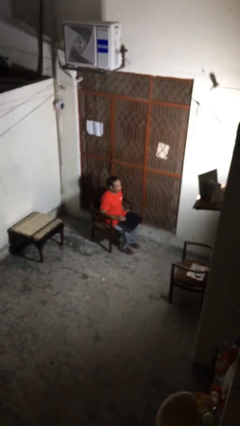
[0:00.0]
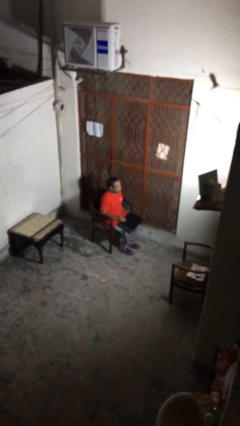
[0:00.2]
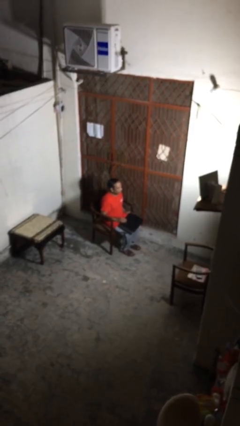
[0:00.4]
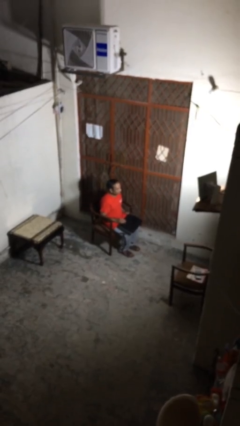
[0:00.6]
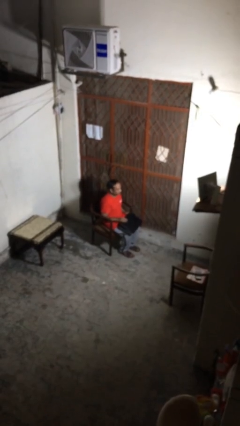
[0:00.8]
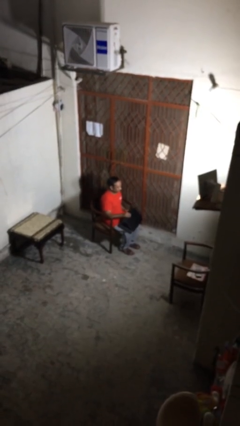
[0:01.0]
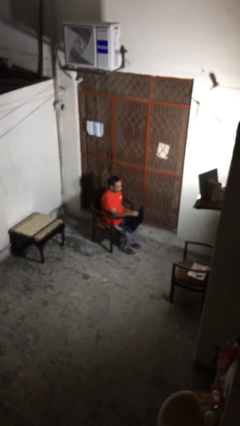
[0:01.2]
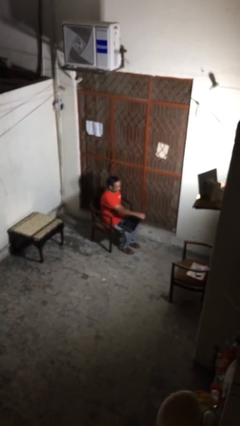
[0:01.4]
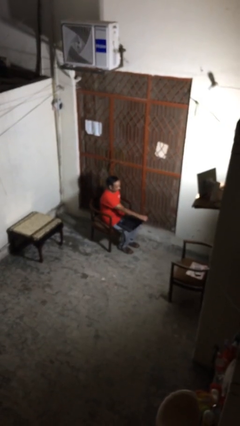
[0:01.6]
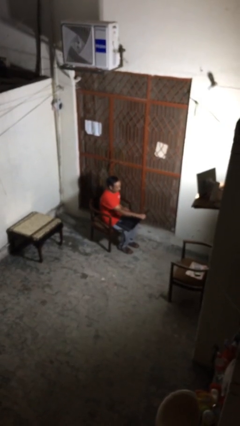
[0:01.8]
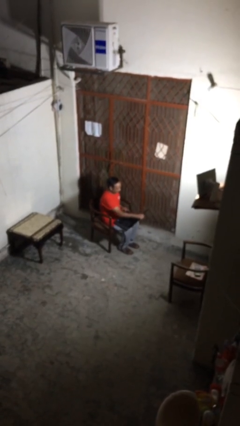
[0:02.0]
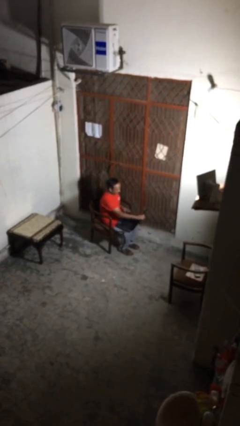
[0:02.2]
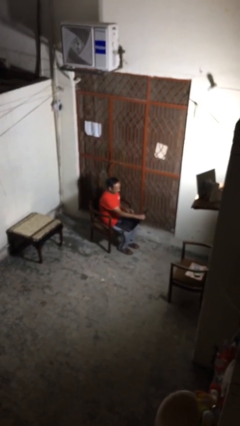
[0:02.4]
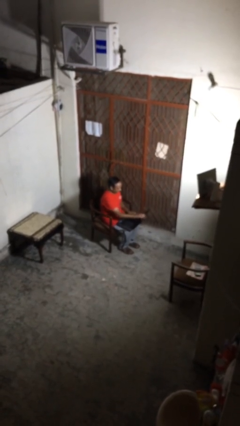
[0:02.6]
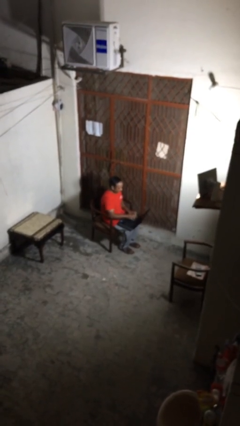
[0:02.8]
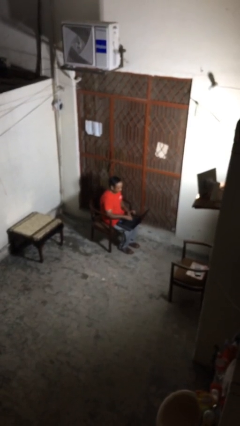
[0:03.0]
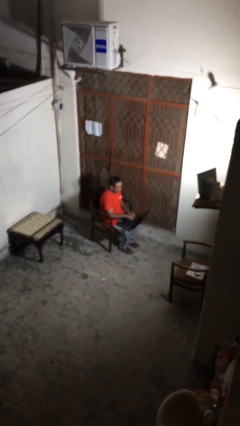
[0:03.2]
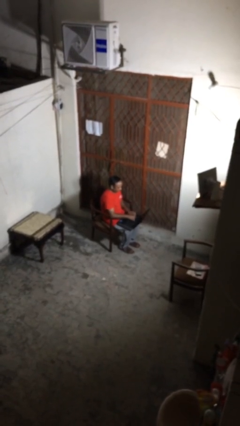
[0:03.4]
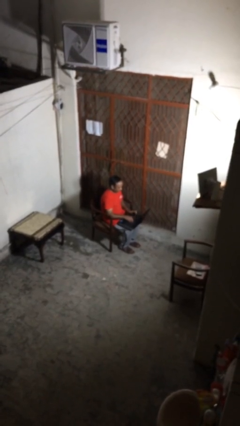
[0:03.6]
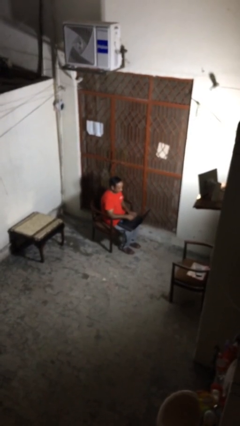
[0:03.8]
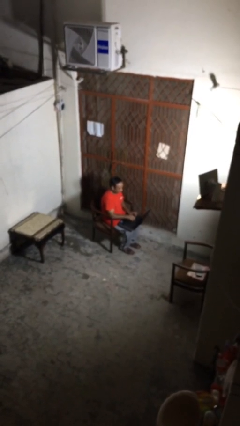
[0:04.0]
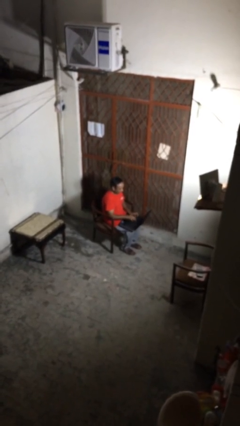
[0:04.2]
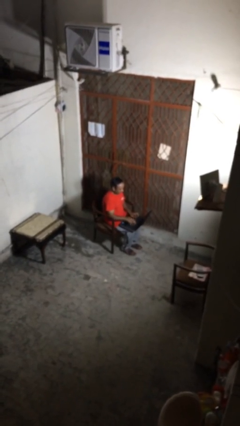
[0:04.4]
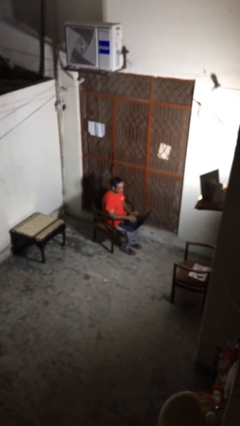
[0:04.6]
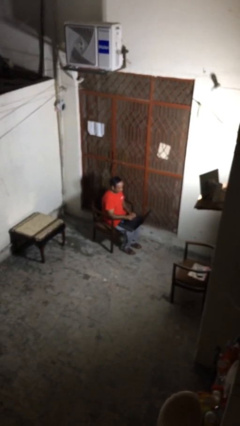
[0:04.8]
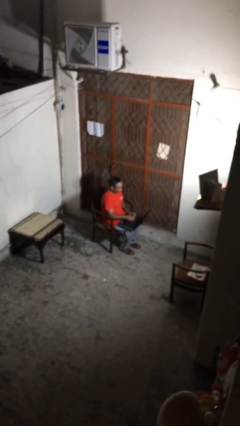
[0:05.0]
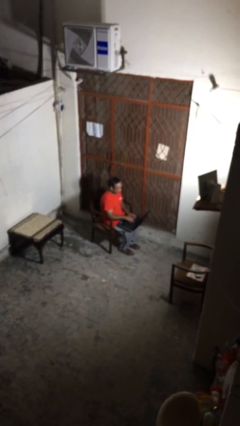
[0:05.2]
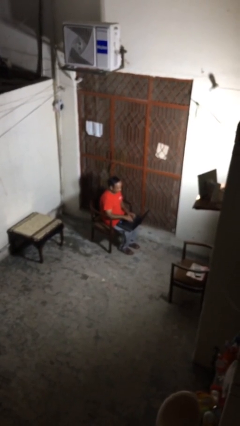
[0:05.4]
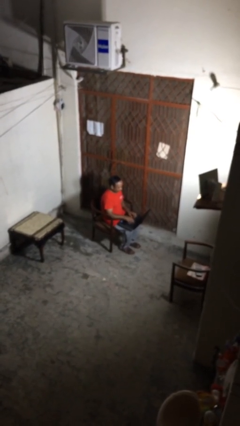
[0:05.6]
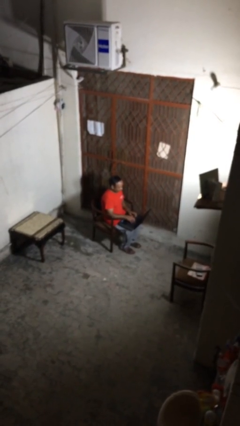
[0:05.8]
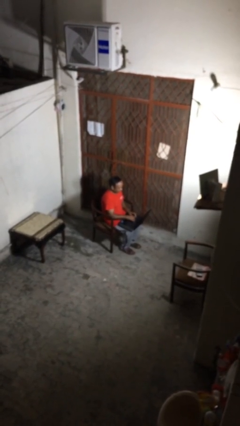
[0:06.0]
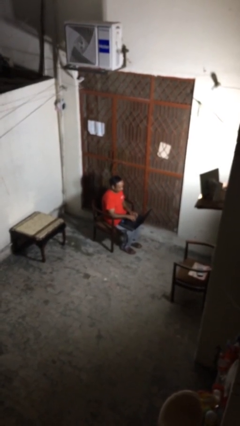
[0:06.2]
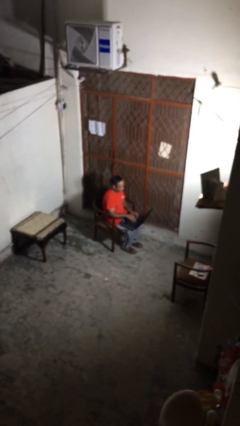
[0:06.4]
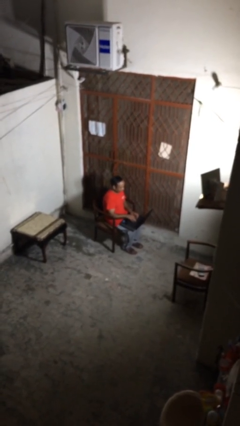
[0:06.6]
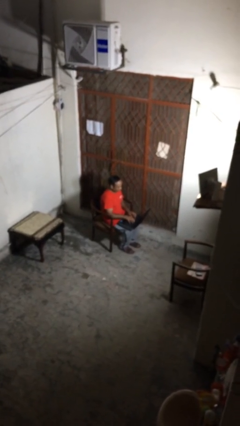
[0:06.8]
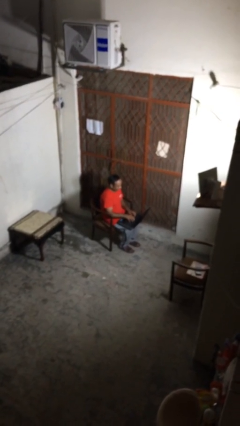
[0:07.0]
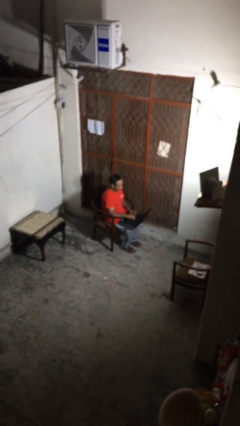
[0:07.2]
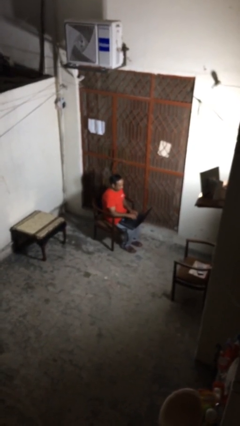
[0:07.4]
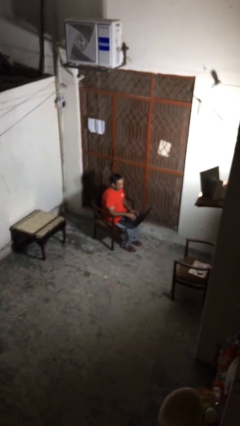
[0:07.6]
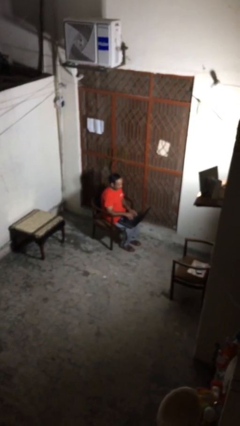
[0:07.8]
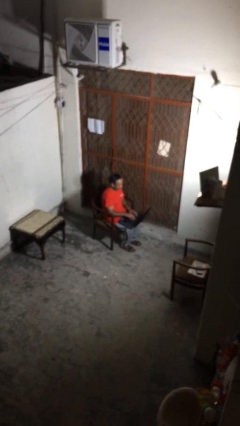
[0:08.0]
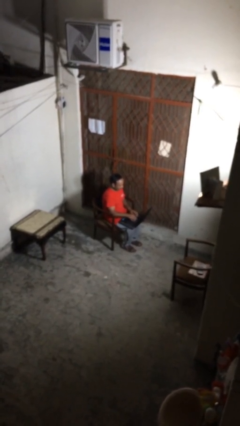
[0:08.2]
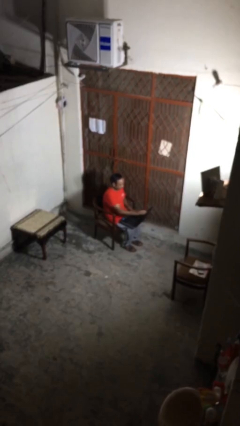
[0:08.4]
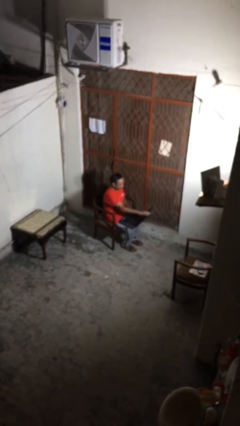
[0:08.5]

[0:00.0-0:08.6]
person interacts with laptop

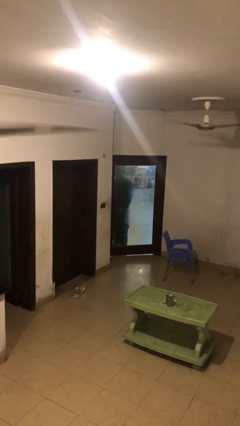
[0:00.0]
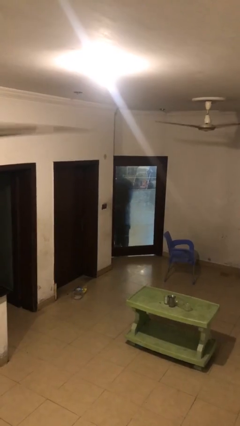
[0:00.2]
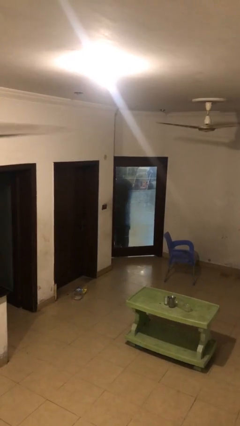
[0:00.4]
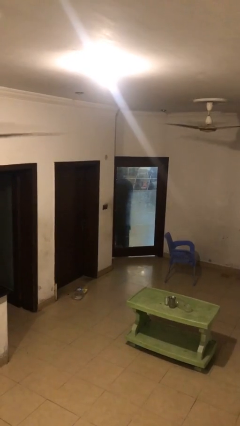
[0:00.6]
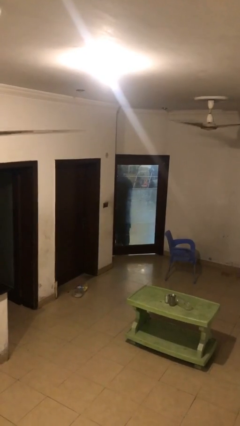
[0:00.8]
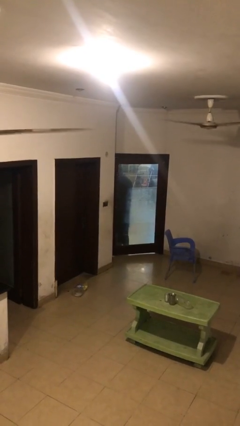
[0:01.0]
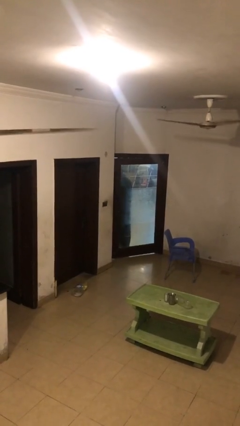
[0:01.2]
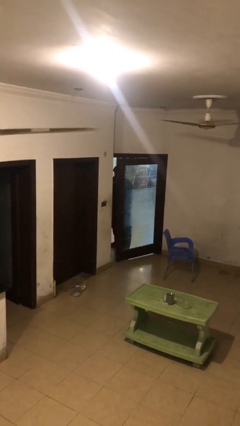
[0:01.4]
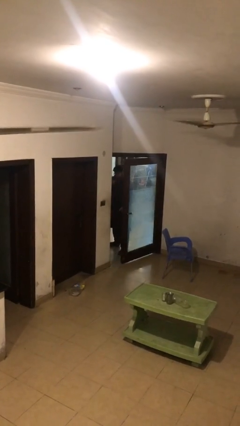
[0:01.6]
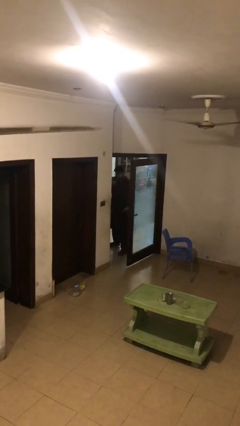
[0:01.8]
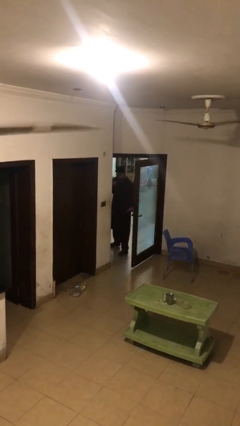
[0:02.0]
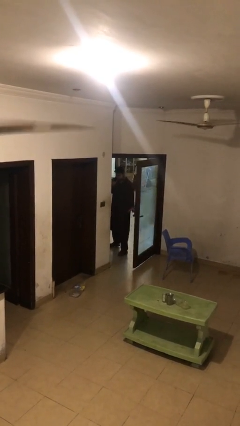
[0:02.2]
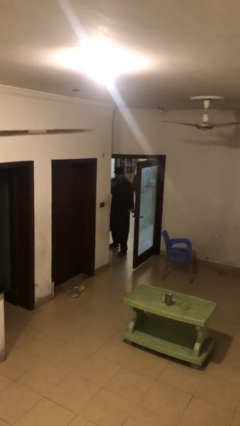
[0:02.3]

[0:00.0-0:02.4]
person opens facility door

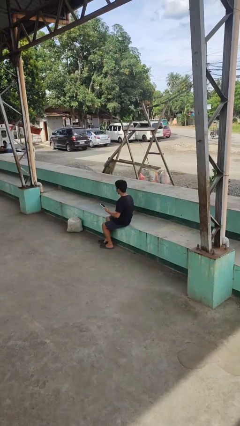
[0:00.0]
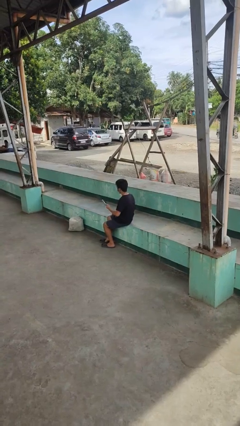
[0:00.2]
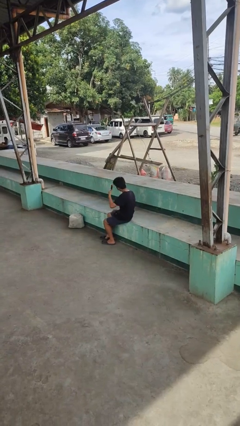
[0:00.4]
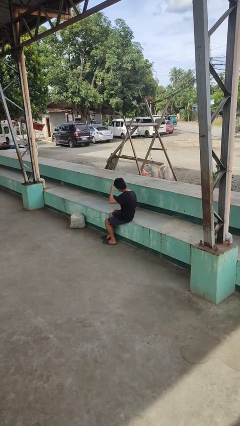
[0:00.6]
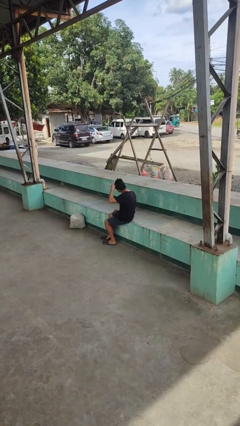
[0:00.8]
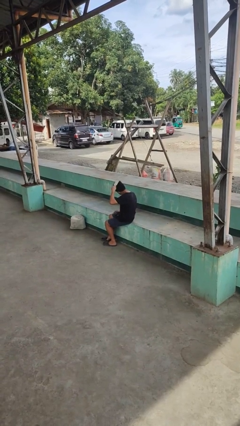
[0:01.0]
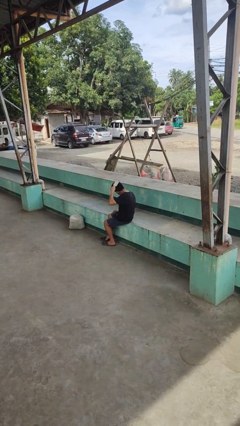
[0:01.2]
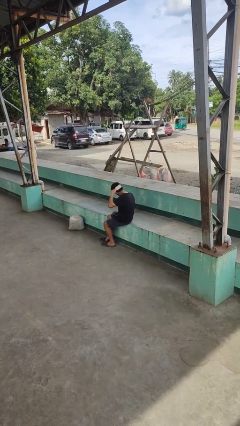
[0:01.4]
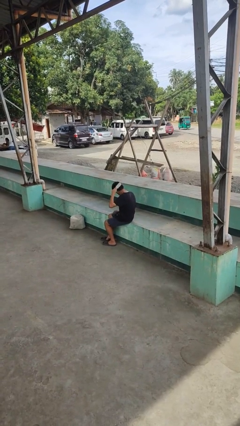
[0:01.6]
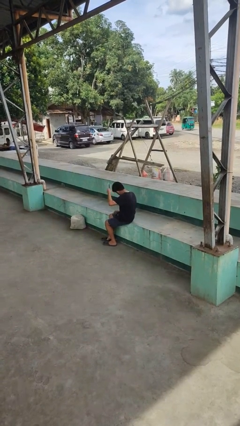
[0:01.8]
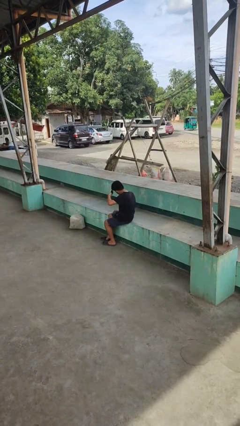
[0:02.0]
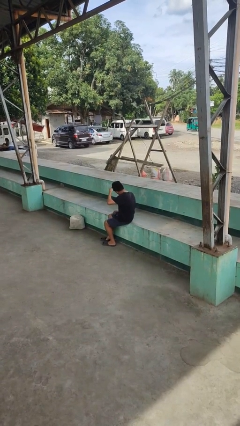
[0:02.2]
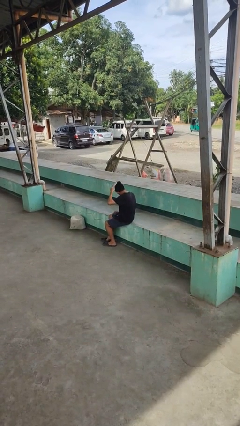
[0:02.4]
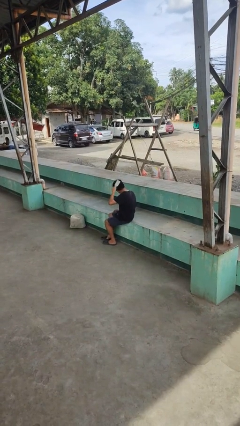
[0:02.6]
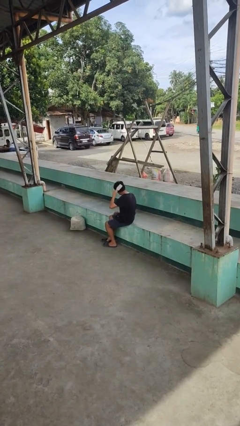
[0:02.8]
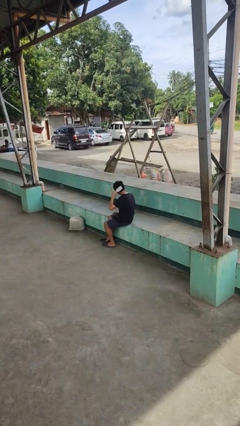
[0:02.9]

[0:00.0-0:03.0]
person brushes hair

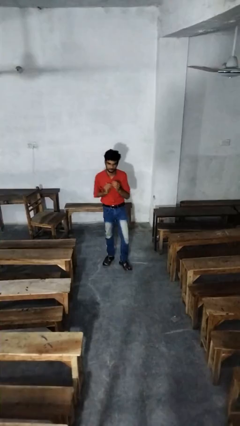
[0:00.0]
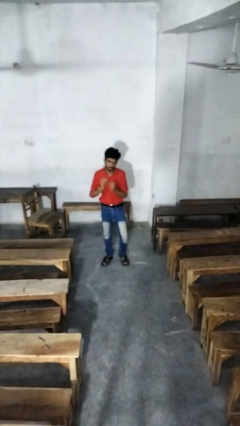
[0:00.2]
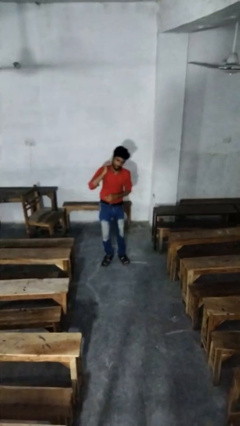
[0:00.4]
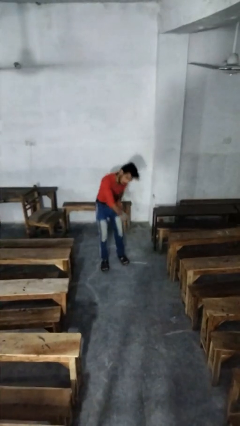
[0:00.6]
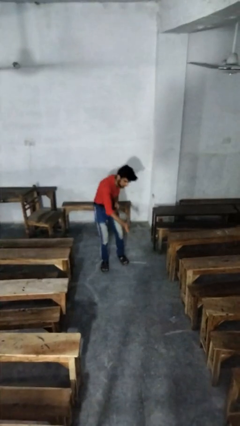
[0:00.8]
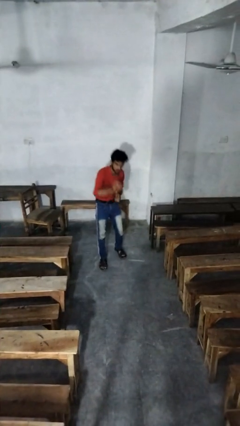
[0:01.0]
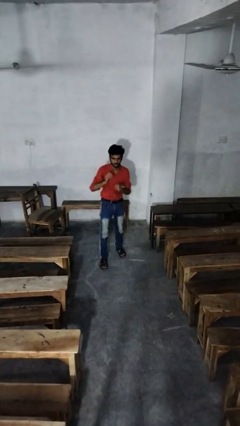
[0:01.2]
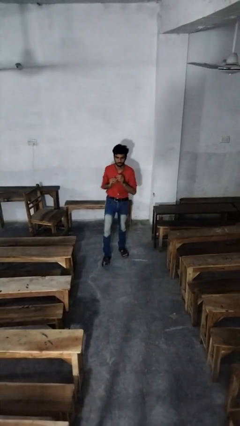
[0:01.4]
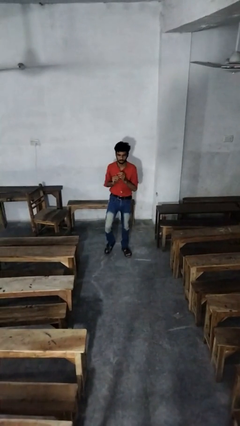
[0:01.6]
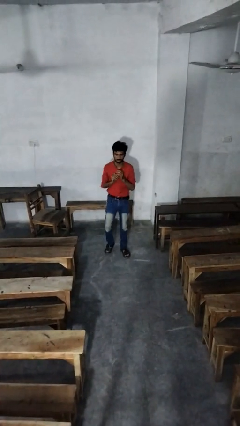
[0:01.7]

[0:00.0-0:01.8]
person karate chop

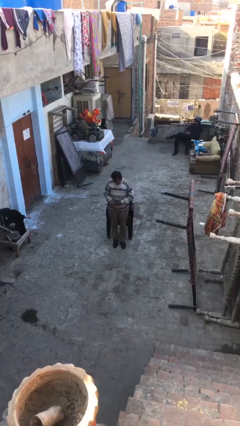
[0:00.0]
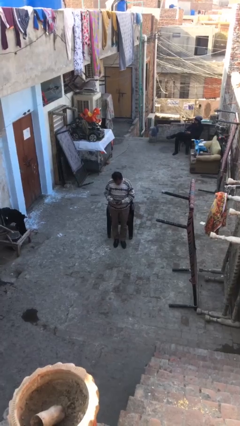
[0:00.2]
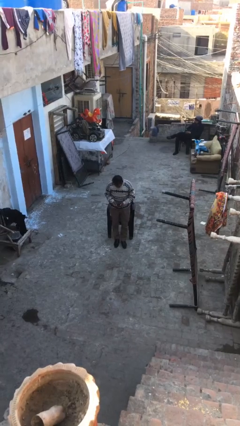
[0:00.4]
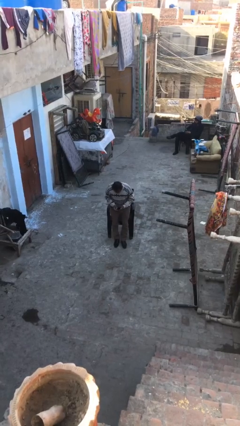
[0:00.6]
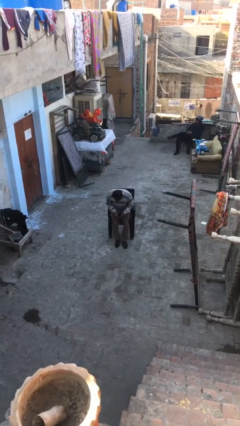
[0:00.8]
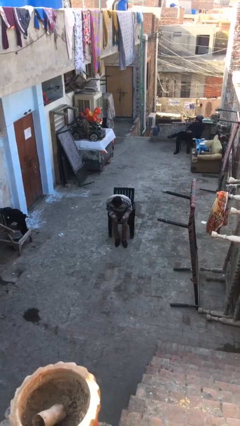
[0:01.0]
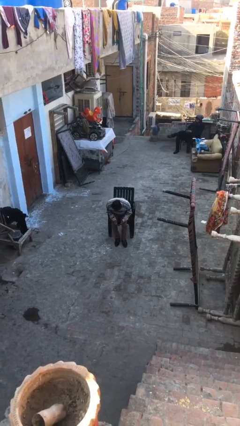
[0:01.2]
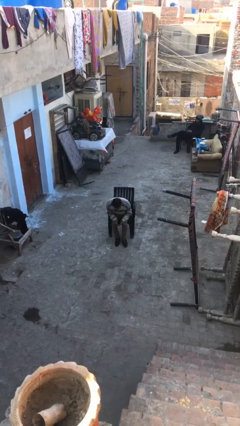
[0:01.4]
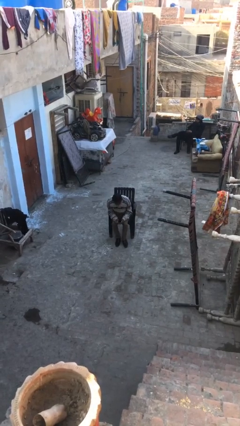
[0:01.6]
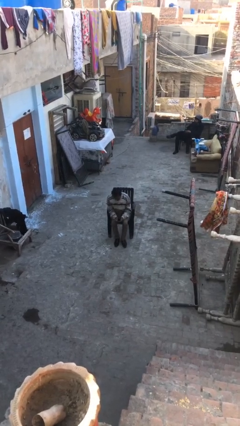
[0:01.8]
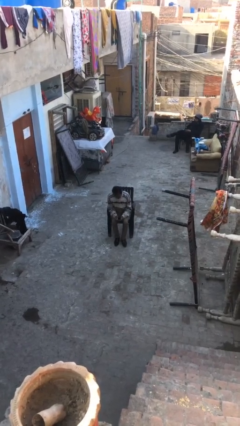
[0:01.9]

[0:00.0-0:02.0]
person sits down
